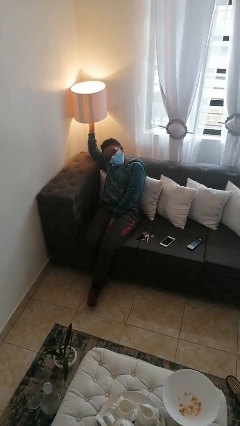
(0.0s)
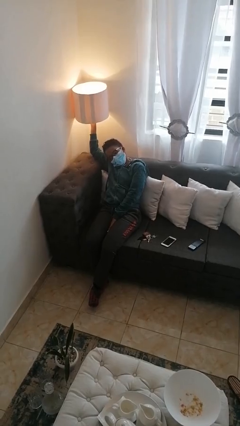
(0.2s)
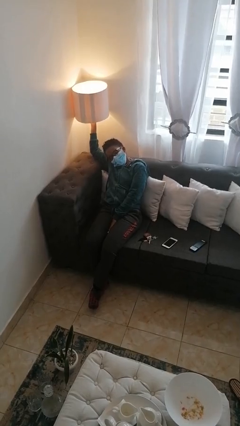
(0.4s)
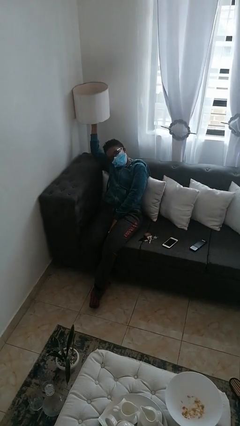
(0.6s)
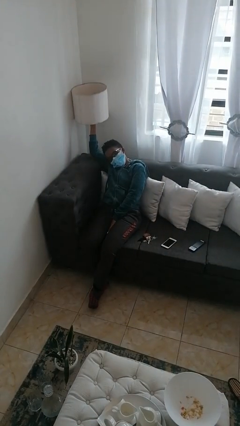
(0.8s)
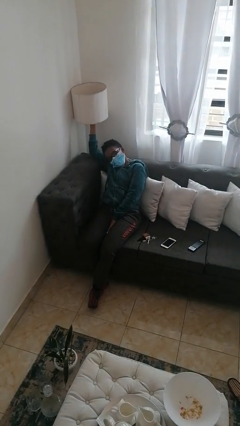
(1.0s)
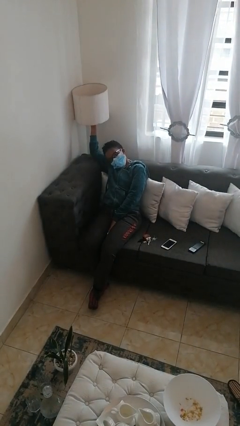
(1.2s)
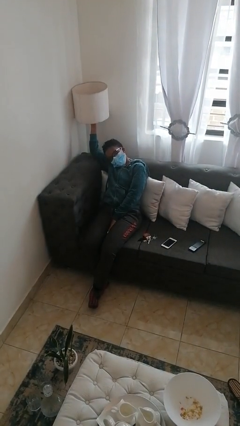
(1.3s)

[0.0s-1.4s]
person turns off lamp

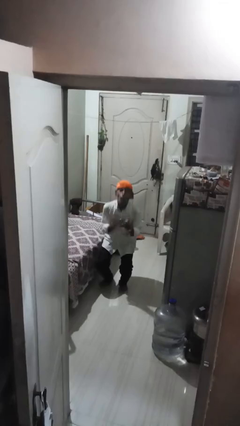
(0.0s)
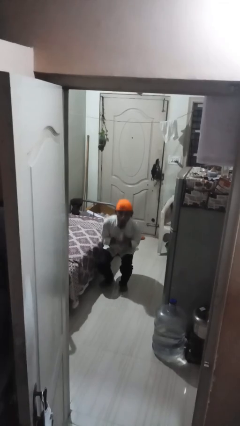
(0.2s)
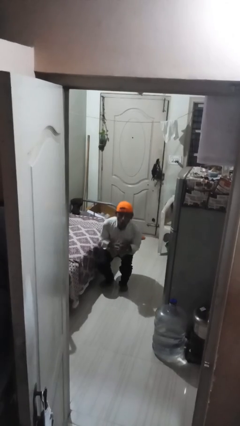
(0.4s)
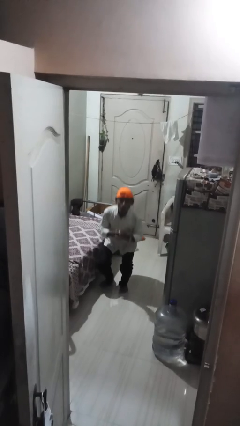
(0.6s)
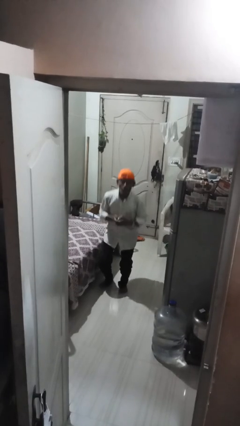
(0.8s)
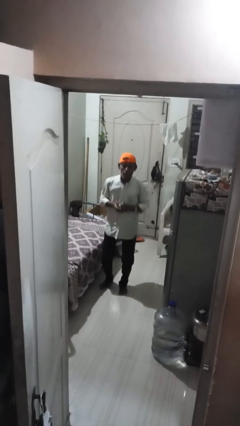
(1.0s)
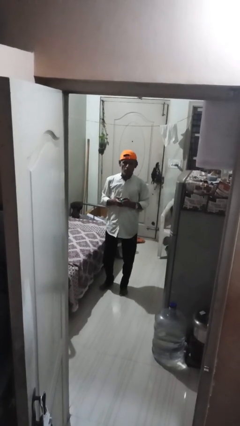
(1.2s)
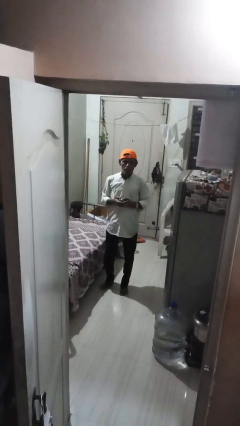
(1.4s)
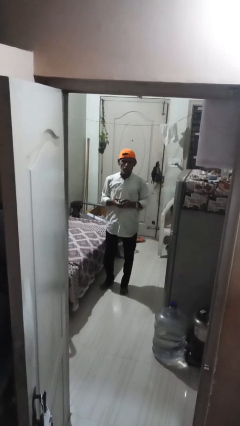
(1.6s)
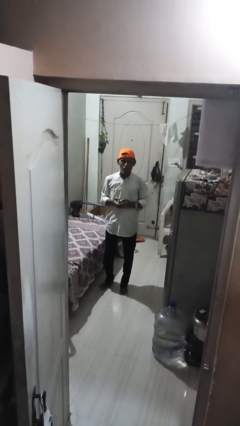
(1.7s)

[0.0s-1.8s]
person catches dropped object

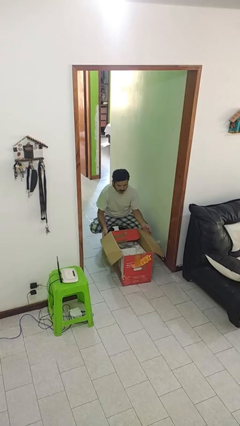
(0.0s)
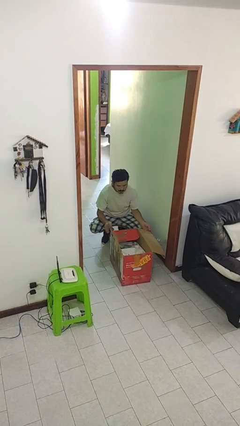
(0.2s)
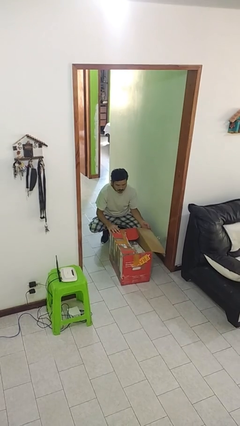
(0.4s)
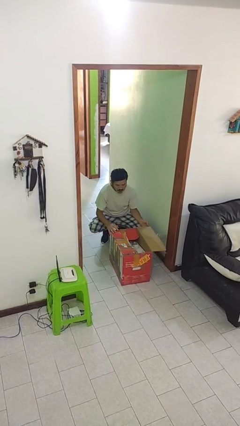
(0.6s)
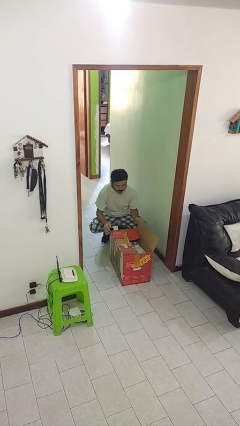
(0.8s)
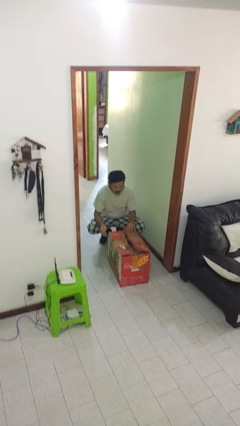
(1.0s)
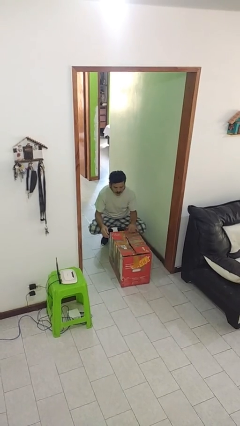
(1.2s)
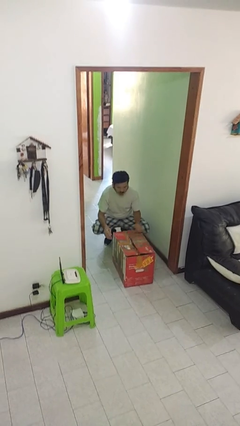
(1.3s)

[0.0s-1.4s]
person closes box

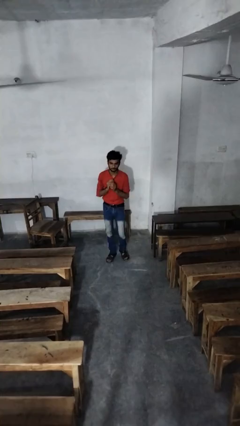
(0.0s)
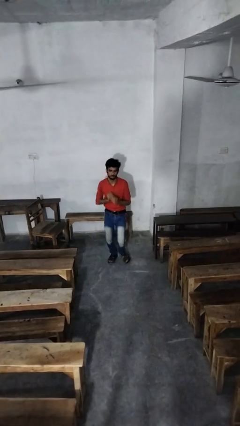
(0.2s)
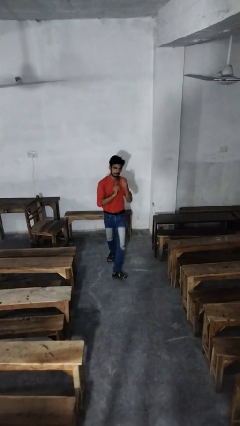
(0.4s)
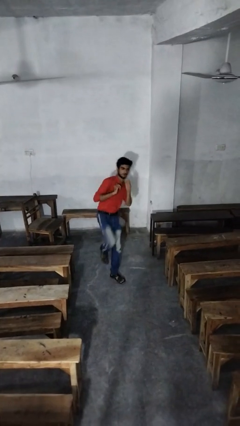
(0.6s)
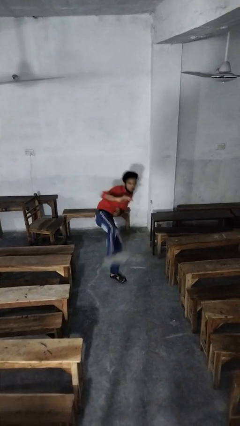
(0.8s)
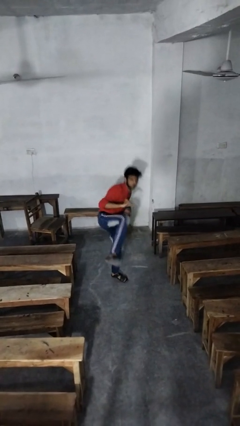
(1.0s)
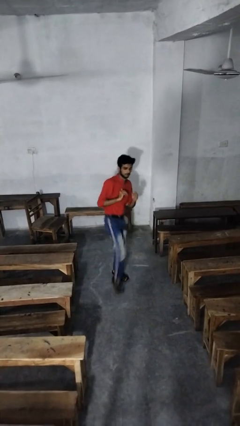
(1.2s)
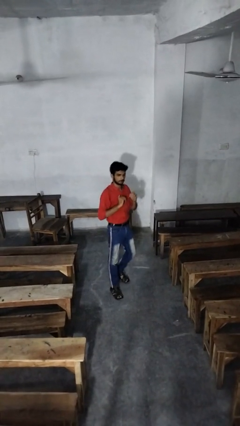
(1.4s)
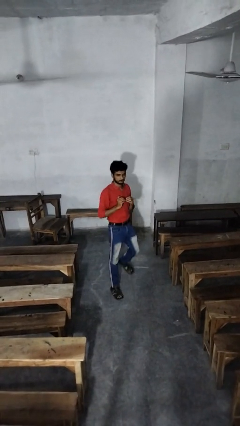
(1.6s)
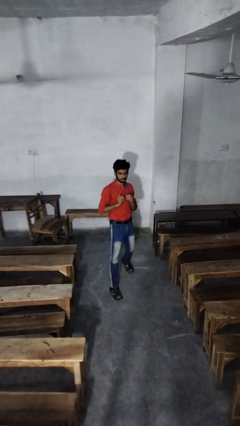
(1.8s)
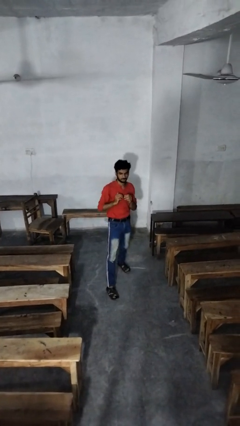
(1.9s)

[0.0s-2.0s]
person karate kicks

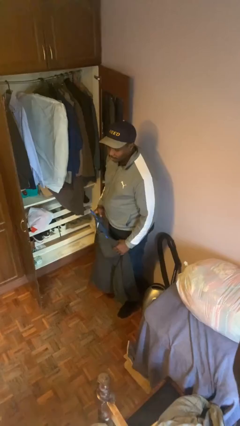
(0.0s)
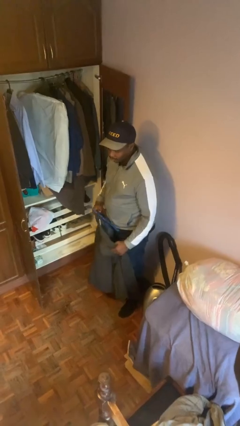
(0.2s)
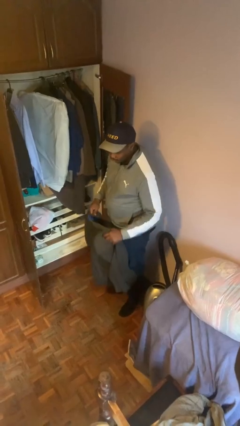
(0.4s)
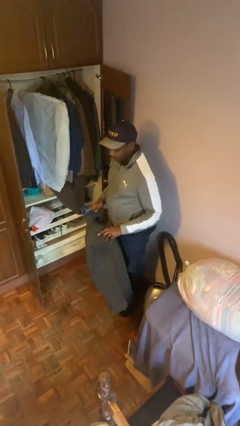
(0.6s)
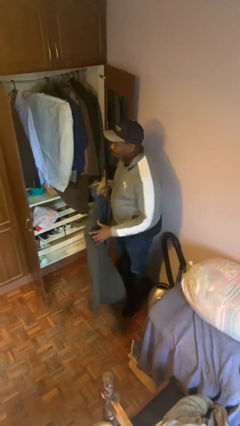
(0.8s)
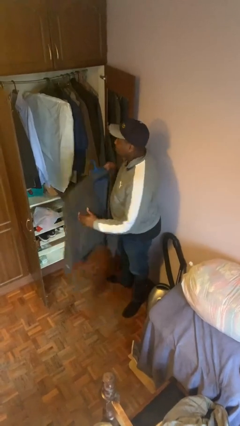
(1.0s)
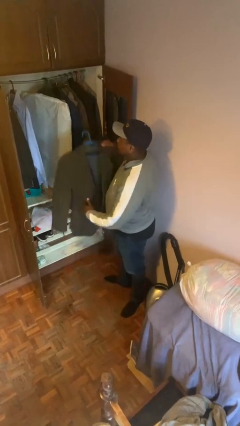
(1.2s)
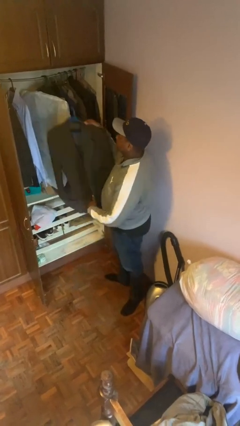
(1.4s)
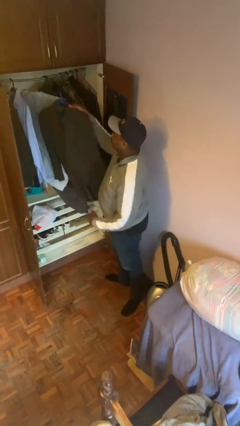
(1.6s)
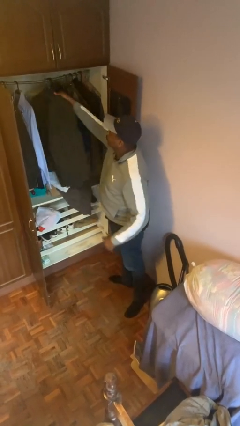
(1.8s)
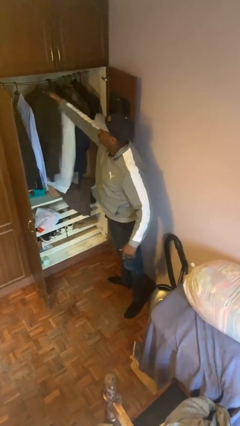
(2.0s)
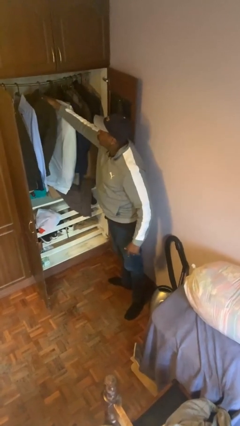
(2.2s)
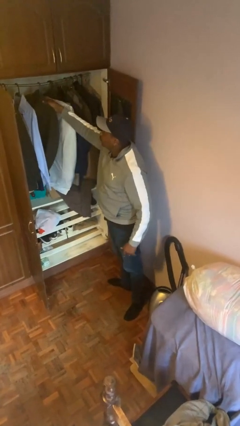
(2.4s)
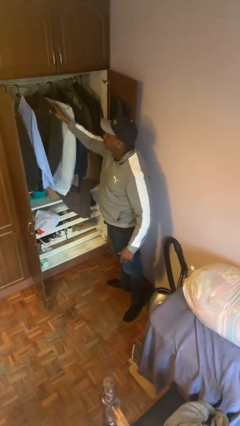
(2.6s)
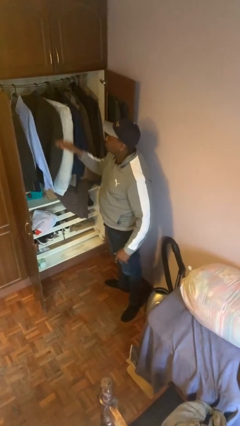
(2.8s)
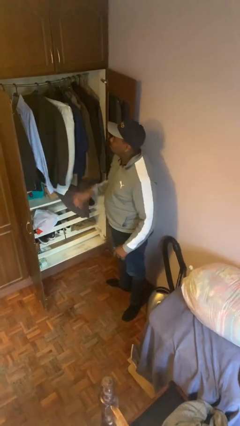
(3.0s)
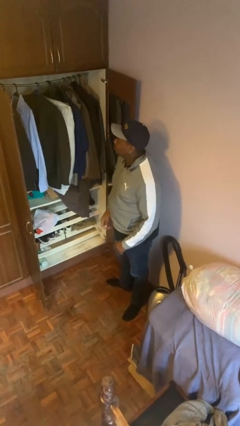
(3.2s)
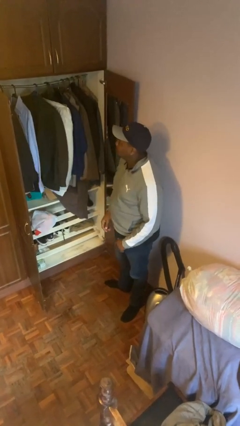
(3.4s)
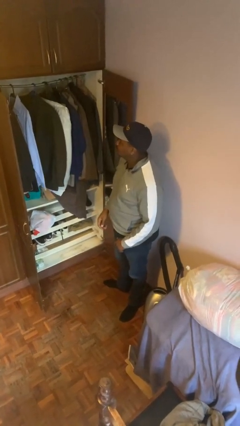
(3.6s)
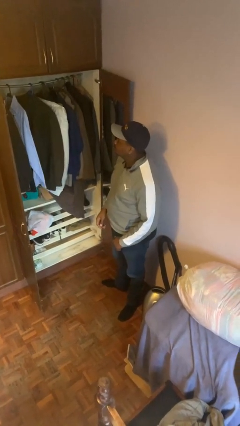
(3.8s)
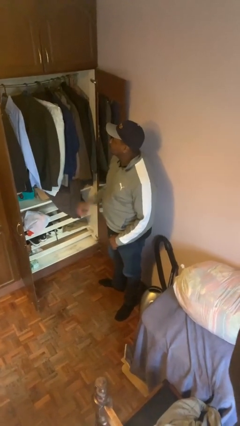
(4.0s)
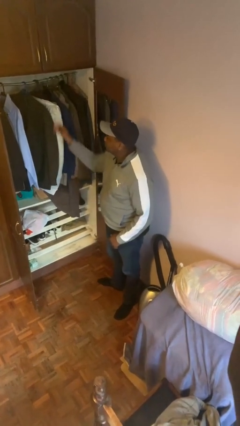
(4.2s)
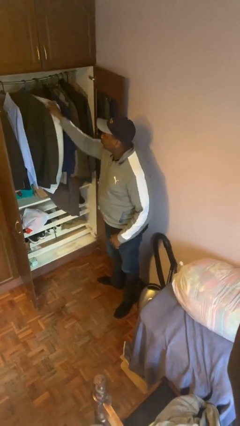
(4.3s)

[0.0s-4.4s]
person puts clothes into closet

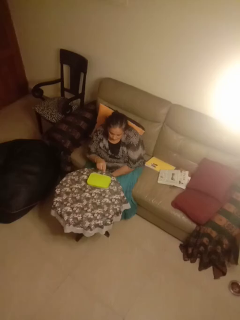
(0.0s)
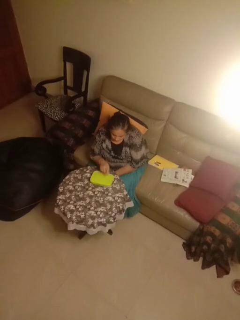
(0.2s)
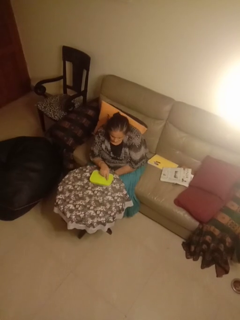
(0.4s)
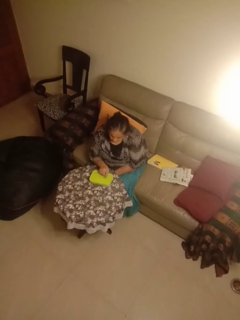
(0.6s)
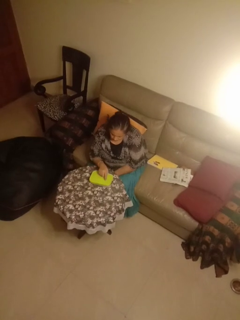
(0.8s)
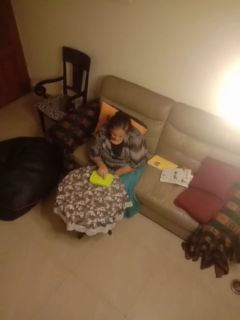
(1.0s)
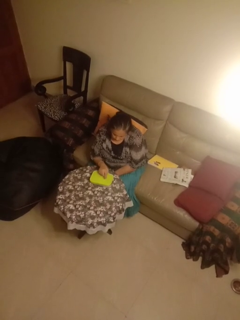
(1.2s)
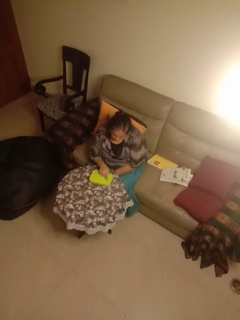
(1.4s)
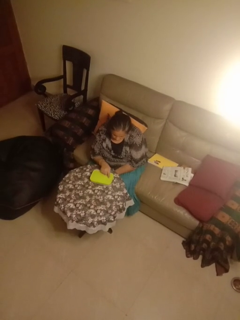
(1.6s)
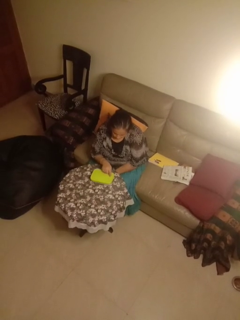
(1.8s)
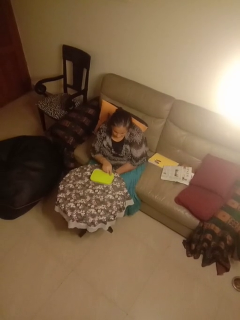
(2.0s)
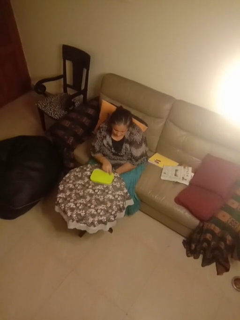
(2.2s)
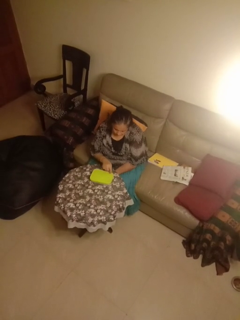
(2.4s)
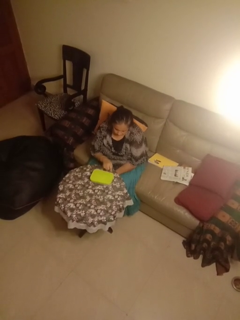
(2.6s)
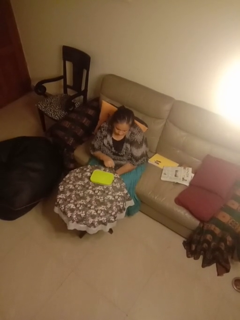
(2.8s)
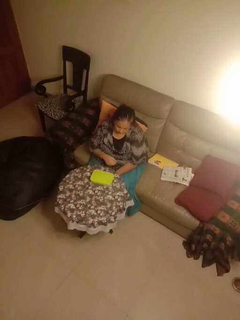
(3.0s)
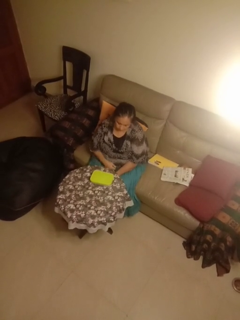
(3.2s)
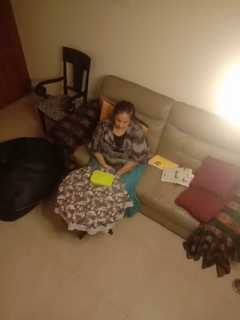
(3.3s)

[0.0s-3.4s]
person taps object with finger

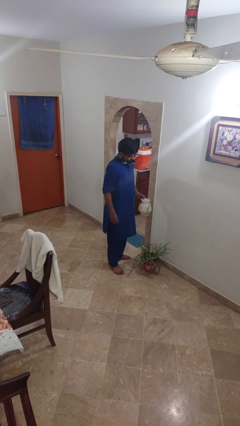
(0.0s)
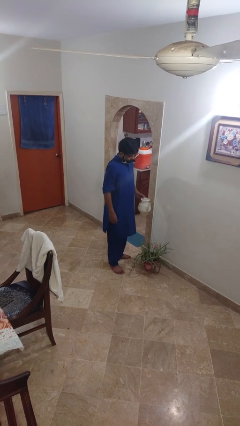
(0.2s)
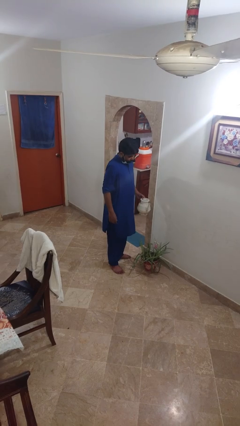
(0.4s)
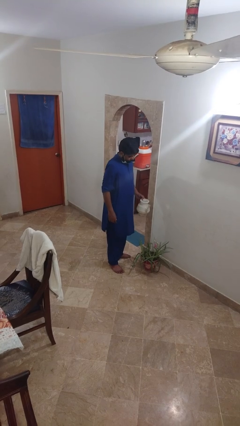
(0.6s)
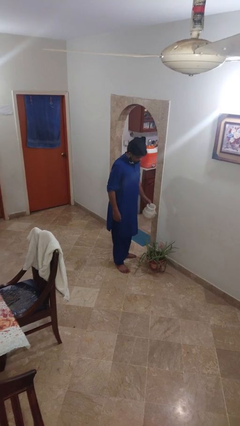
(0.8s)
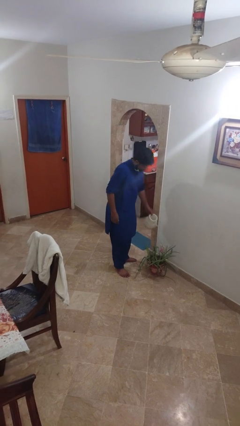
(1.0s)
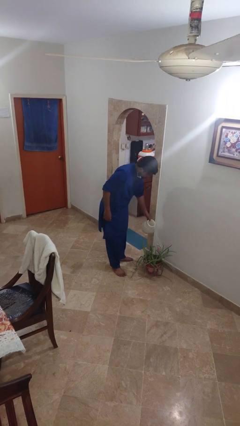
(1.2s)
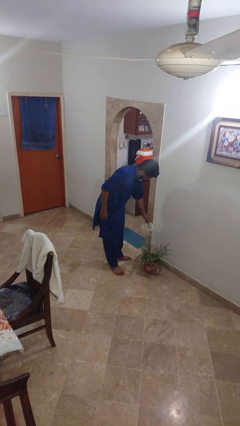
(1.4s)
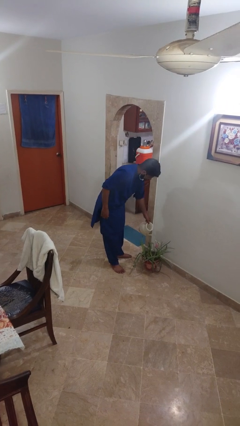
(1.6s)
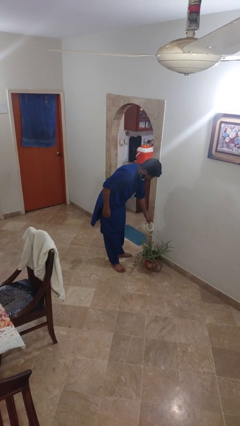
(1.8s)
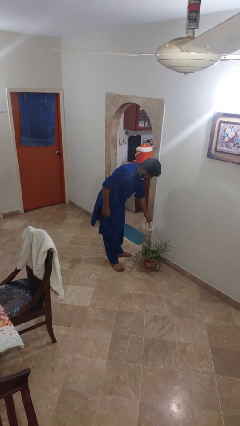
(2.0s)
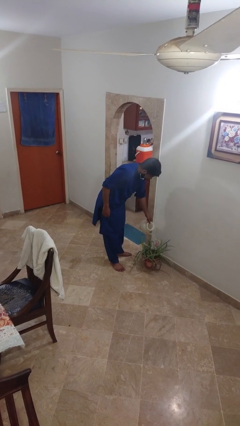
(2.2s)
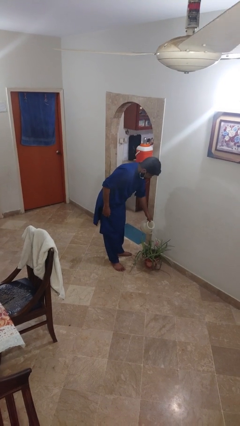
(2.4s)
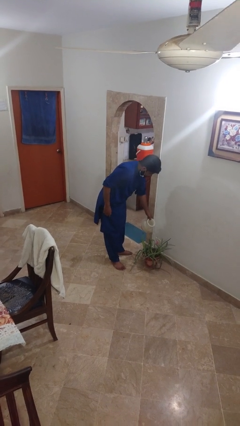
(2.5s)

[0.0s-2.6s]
person waters houseplant

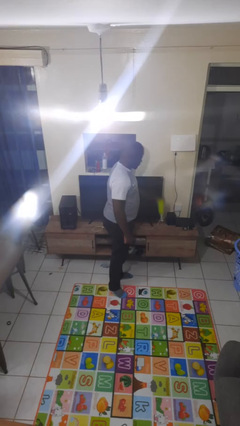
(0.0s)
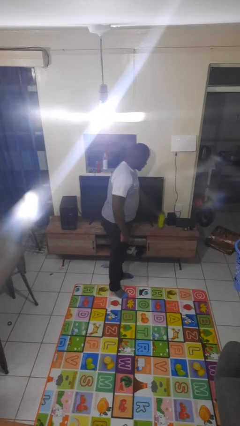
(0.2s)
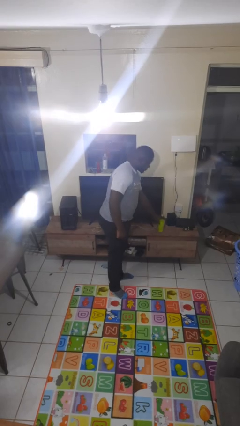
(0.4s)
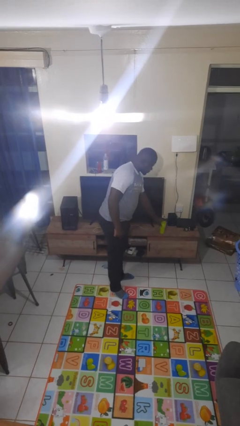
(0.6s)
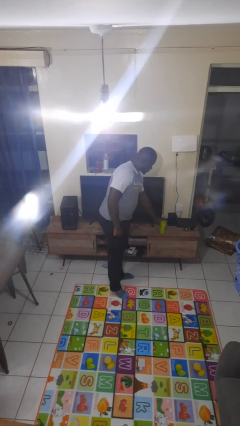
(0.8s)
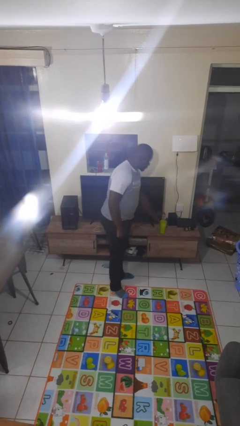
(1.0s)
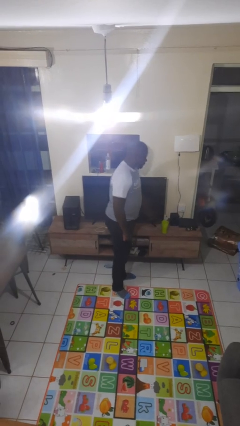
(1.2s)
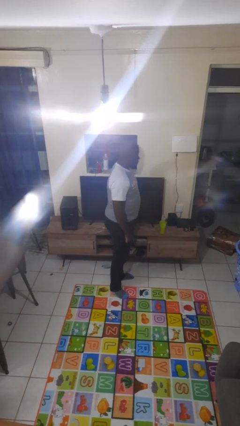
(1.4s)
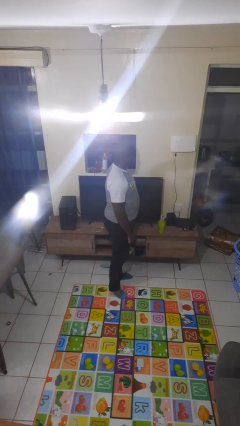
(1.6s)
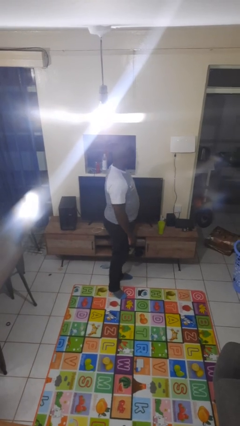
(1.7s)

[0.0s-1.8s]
person puts down object on countertop
